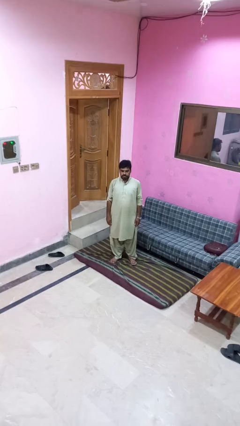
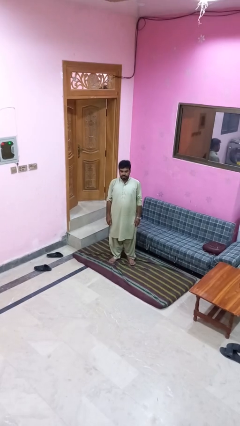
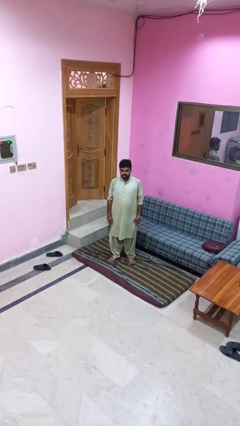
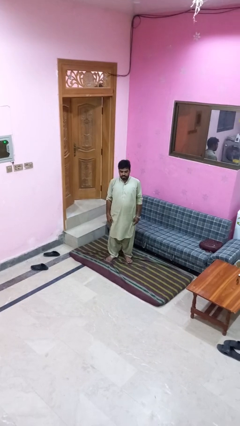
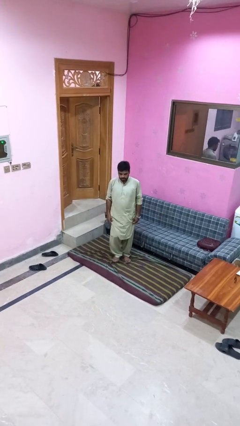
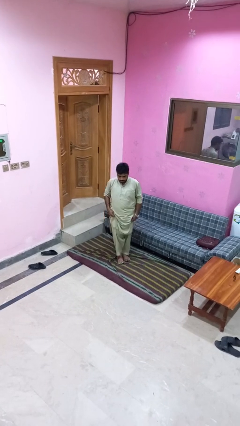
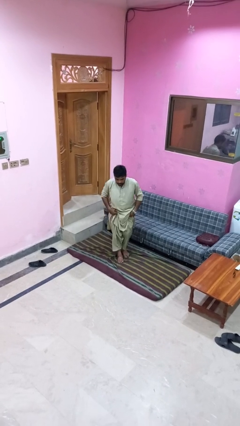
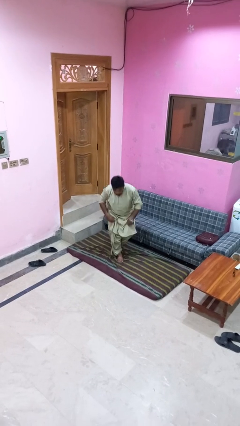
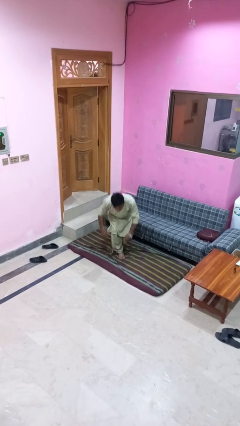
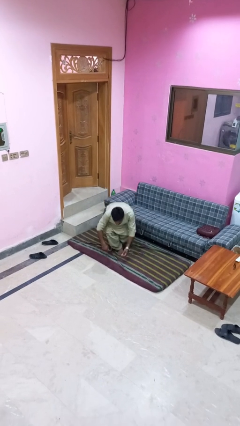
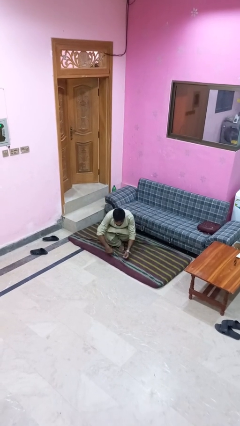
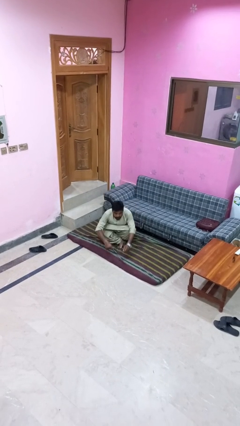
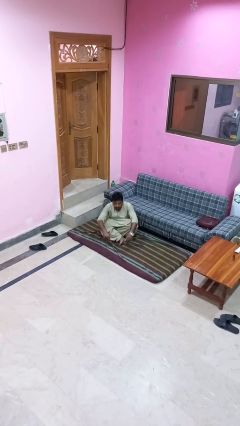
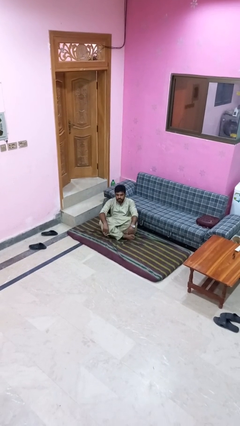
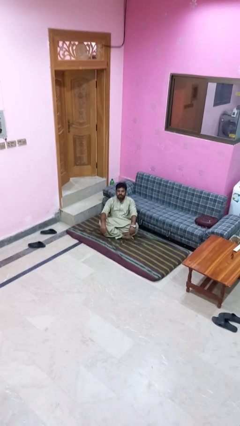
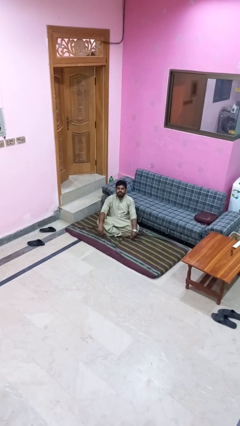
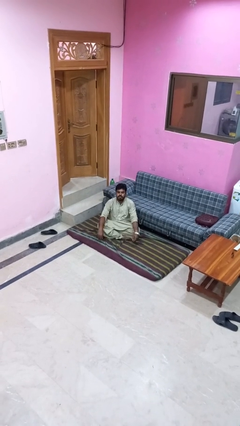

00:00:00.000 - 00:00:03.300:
person sits crisscross

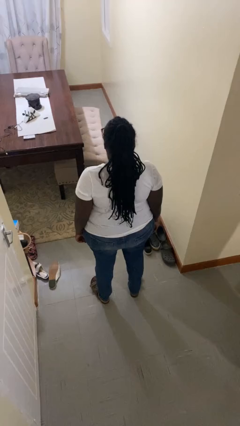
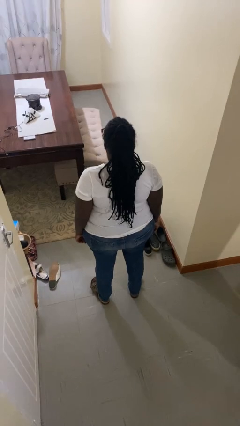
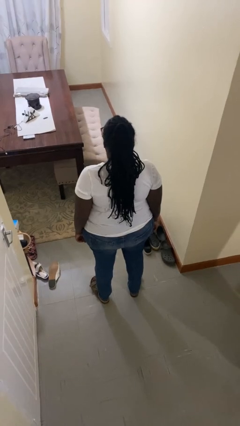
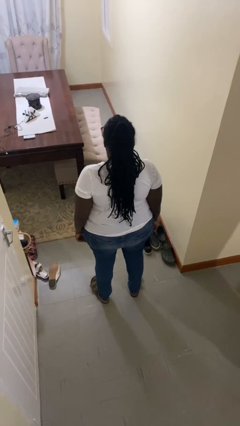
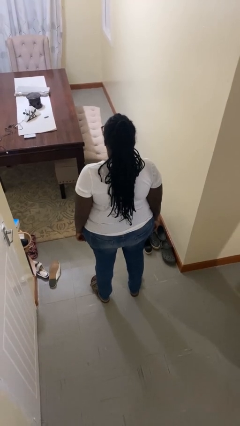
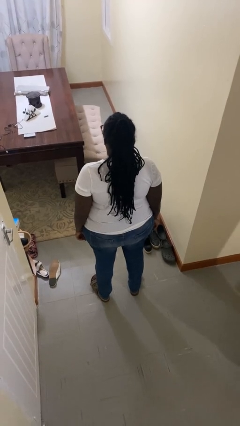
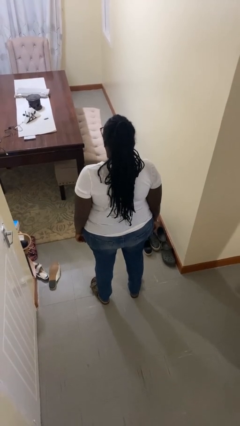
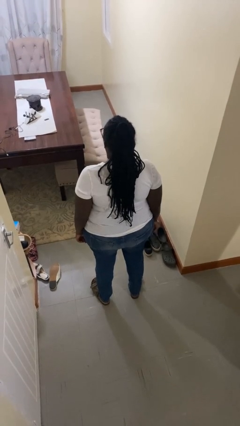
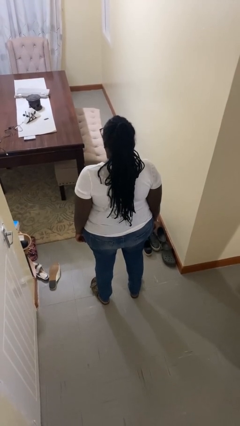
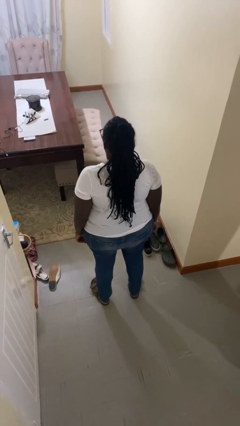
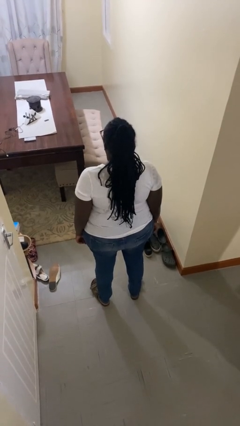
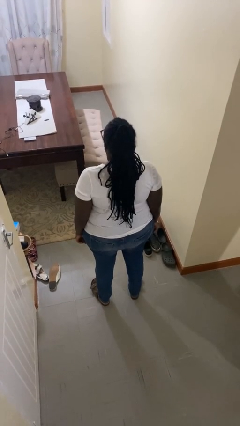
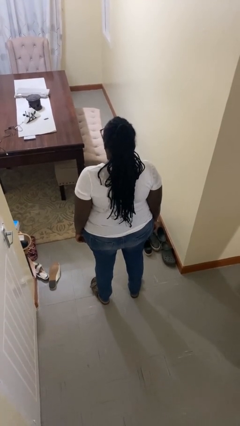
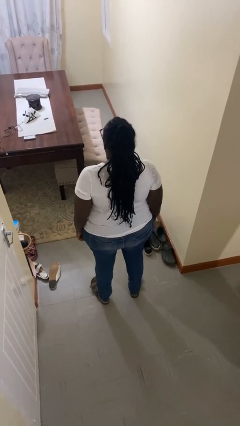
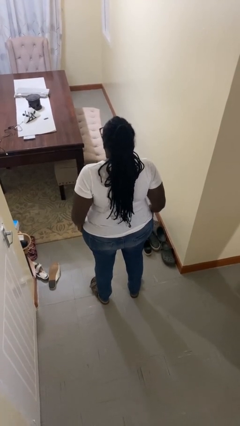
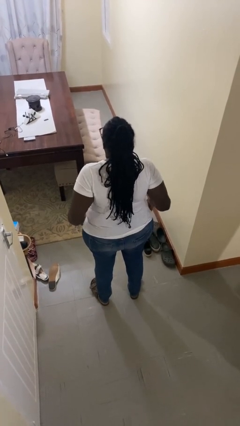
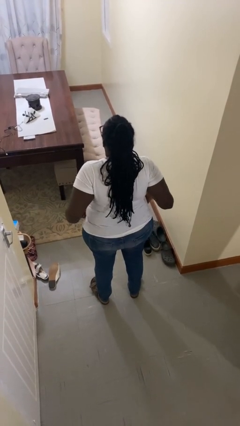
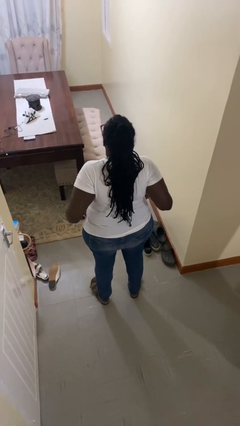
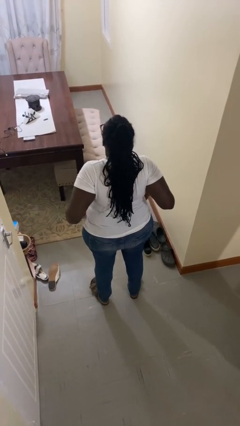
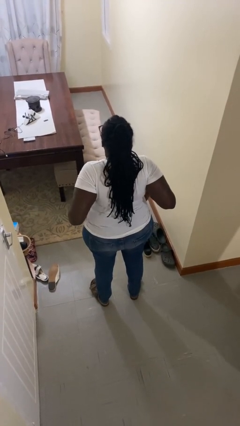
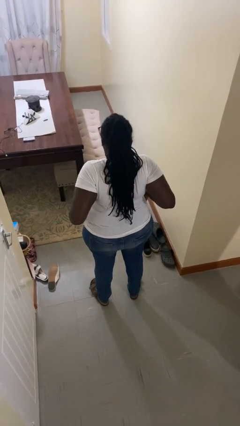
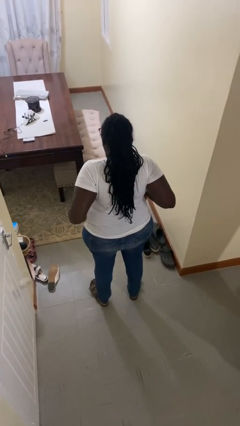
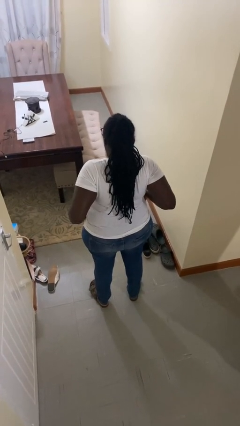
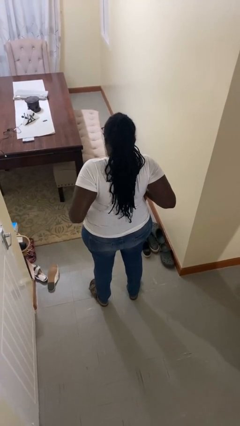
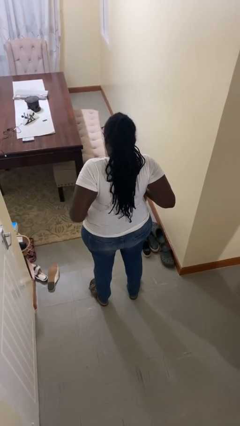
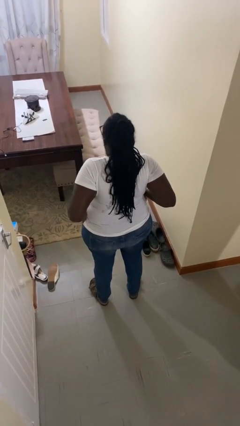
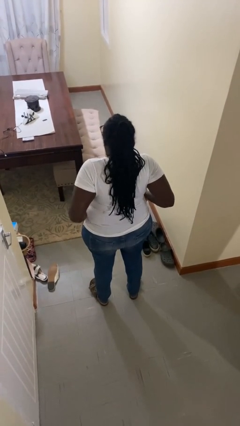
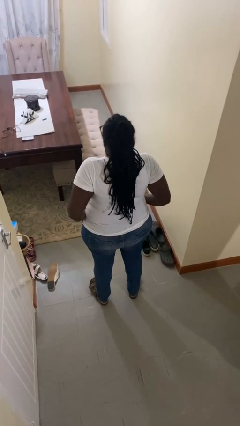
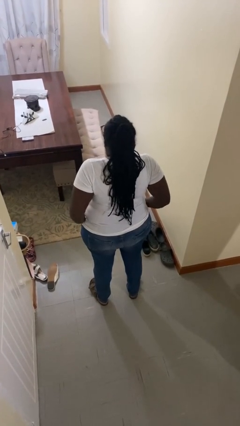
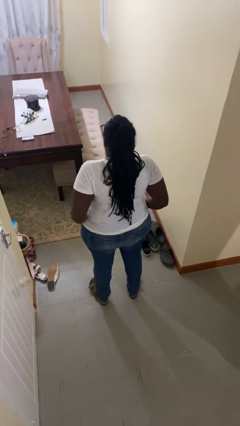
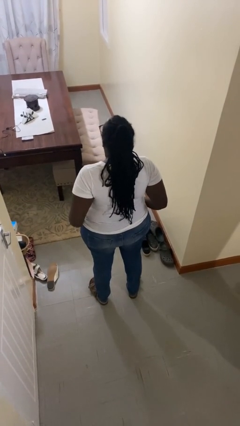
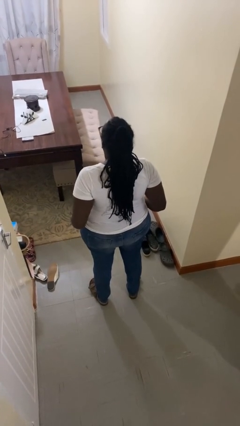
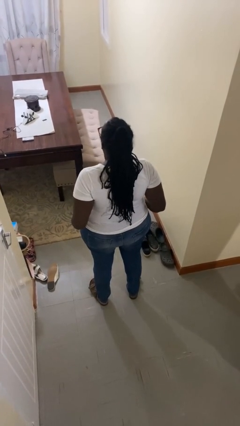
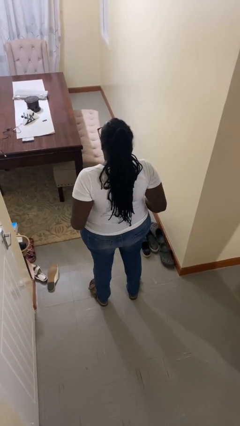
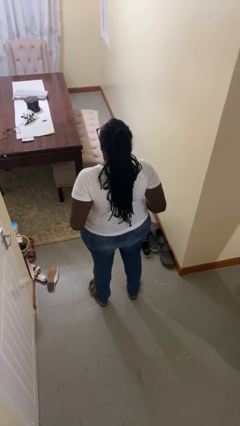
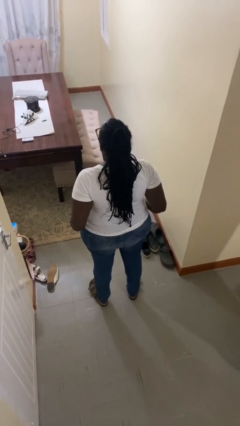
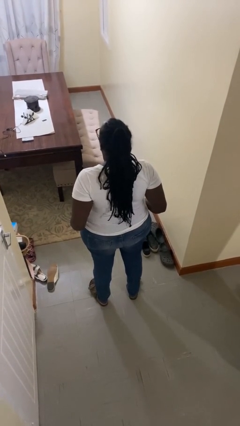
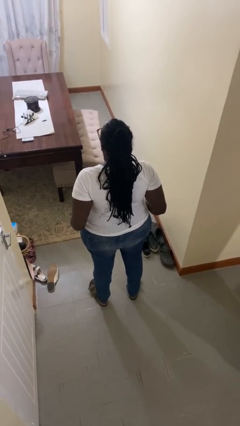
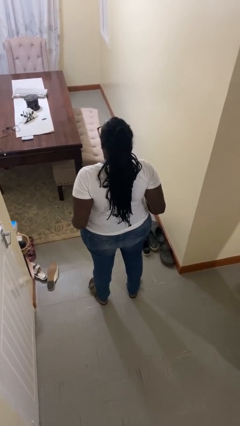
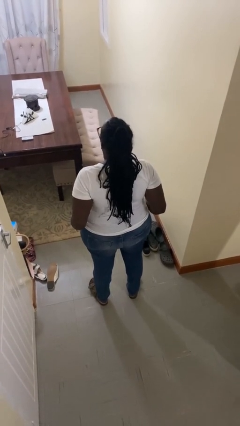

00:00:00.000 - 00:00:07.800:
person puts hands in back pockets

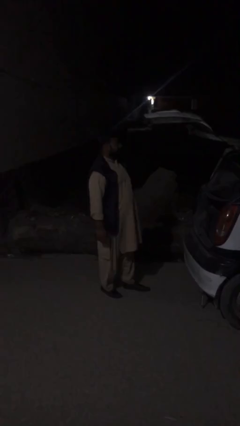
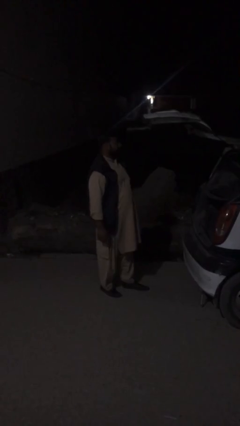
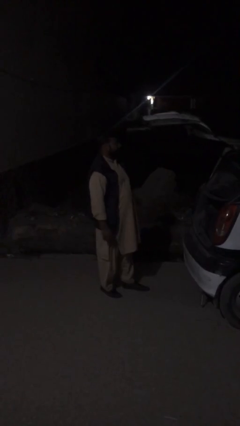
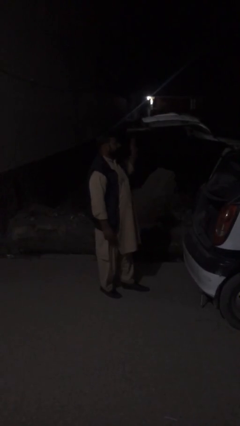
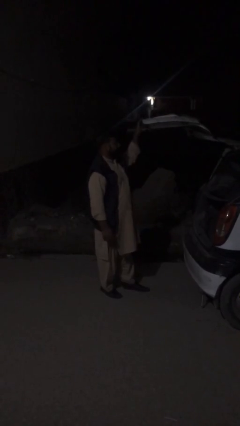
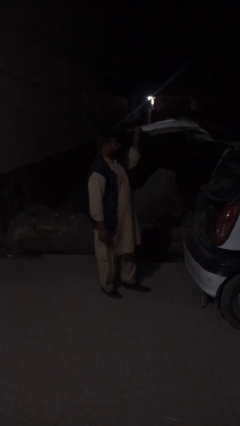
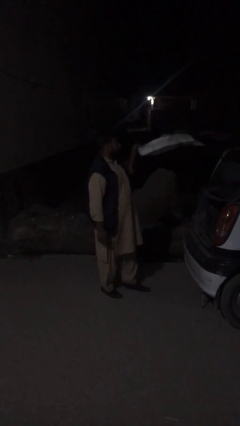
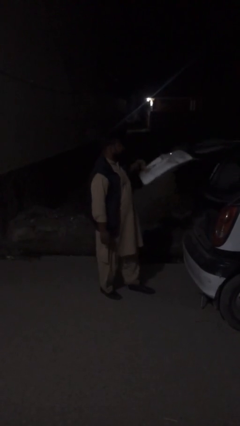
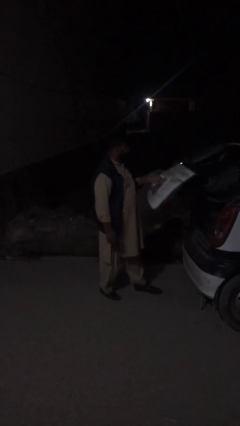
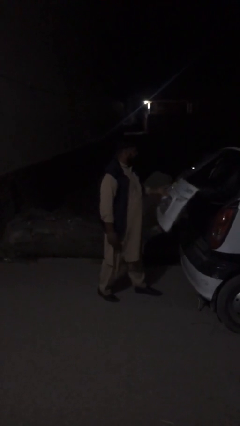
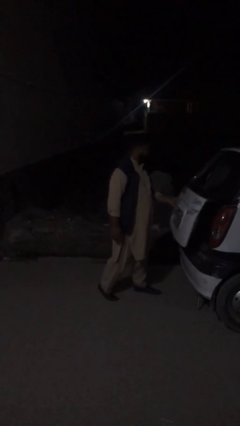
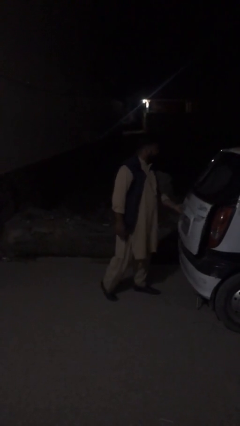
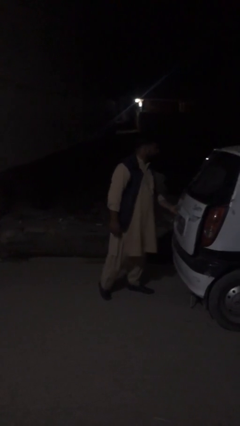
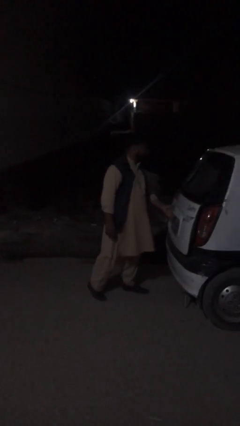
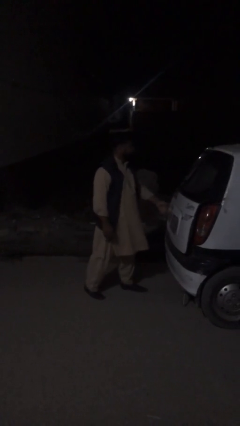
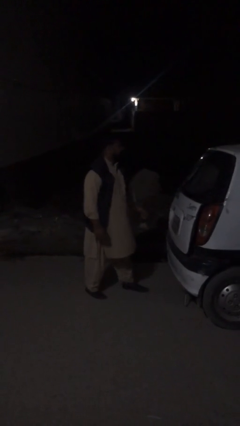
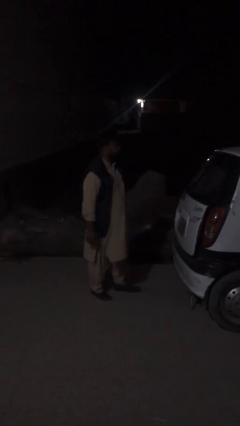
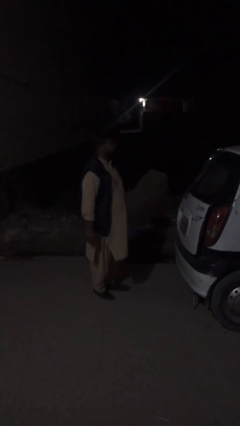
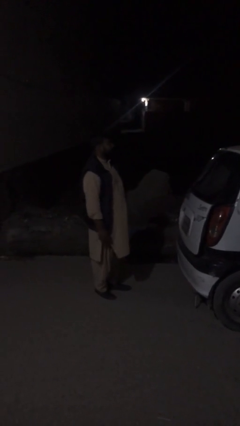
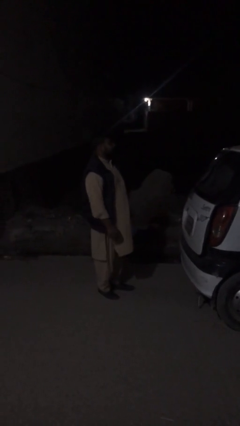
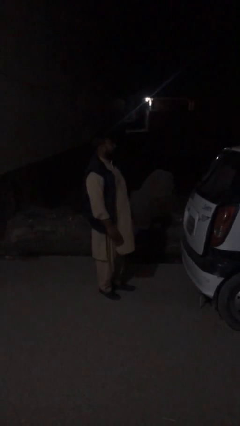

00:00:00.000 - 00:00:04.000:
person closes car trunk

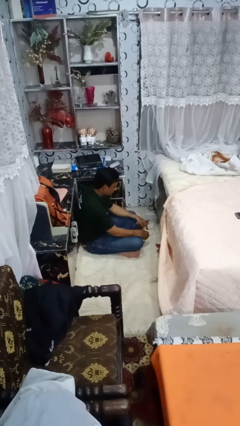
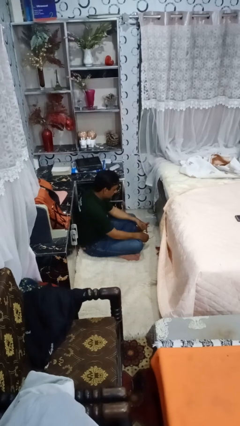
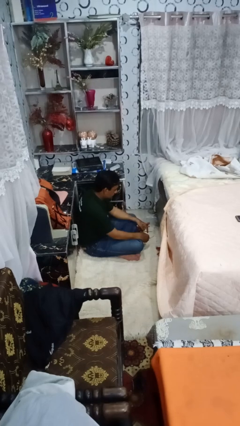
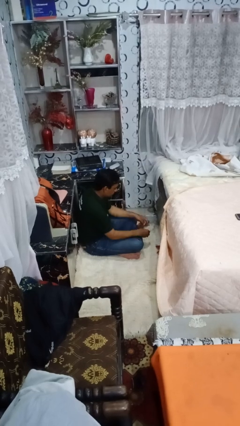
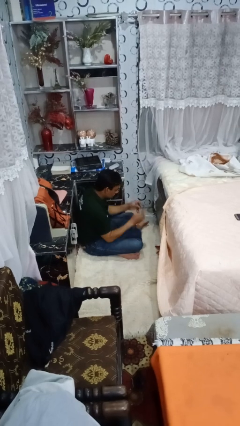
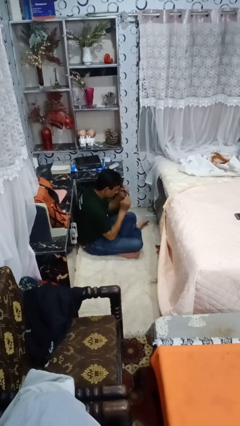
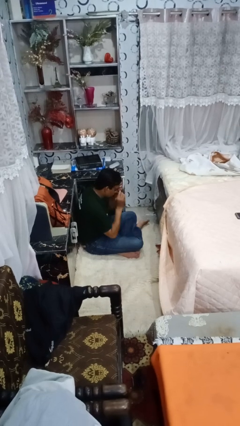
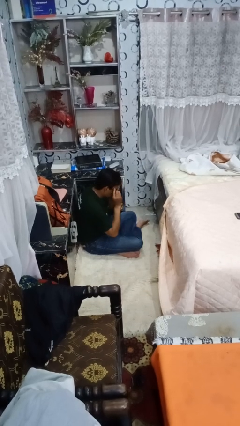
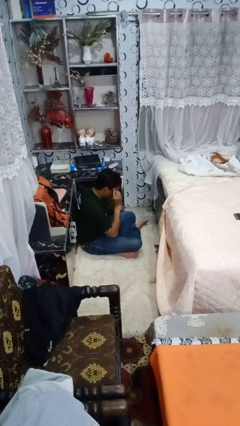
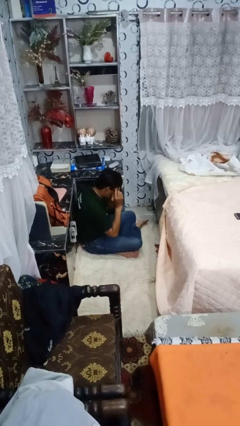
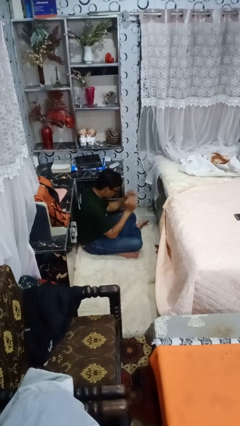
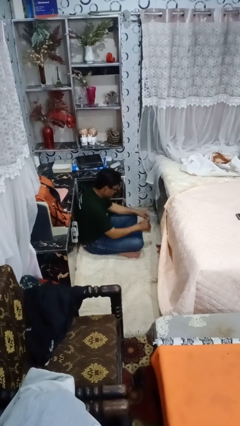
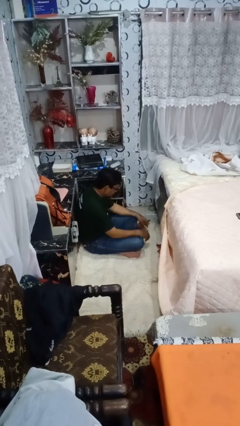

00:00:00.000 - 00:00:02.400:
person puts on glasses

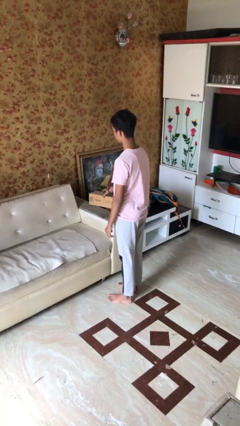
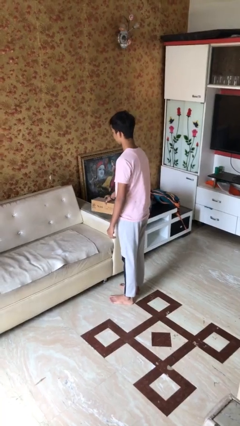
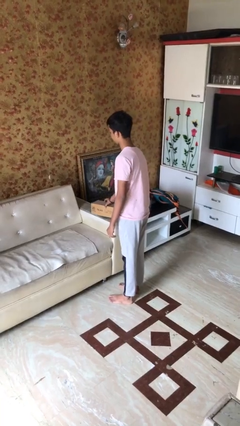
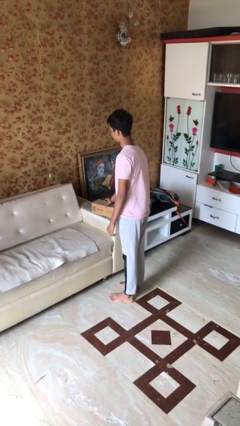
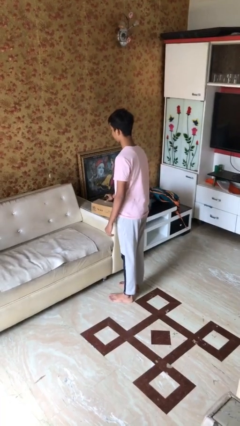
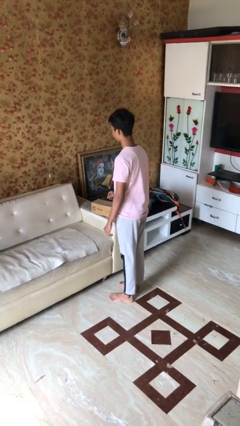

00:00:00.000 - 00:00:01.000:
person puts down object on couch
